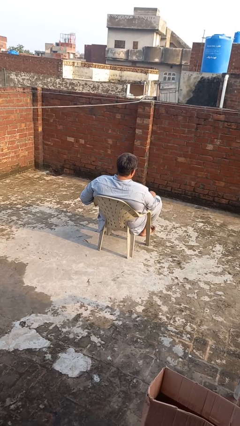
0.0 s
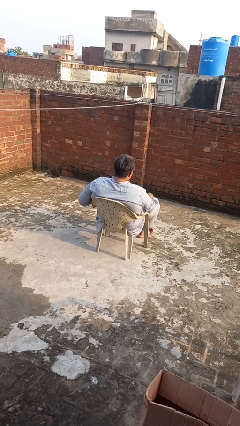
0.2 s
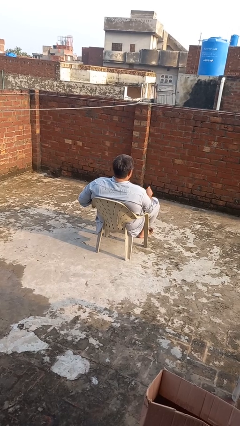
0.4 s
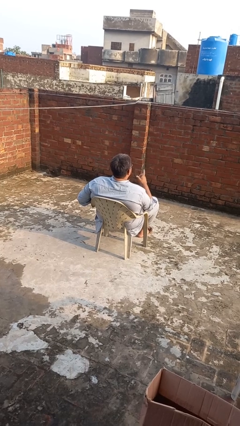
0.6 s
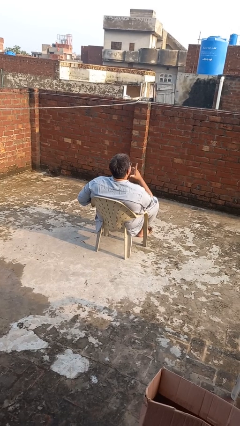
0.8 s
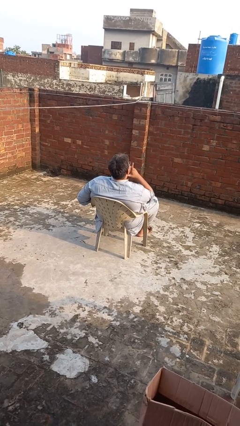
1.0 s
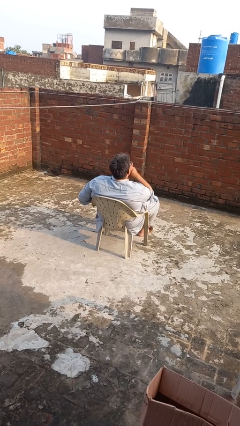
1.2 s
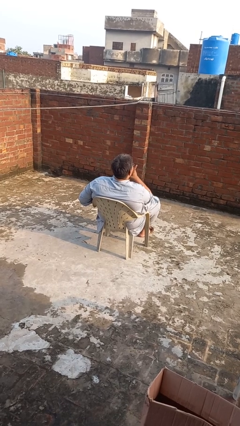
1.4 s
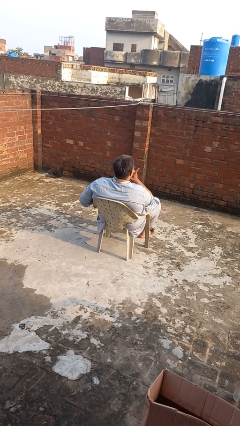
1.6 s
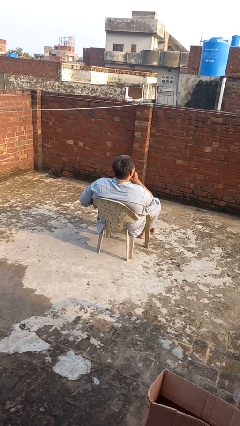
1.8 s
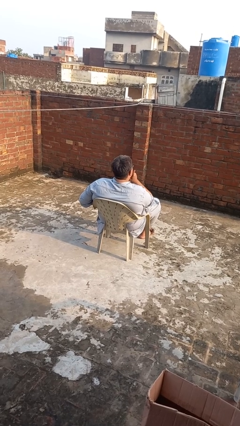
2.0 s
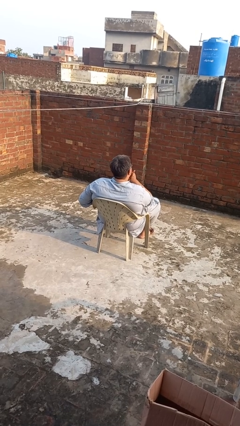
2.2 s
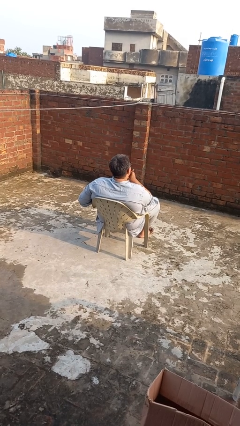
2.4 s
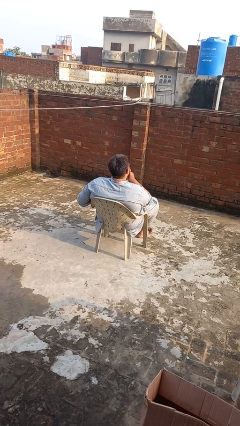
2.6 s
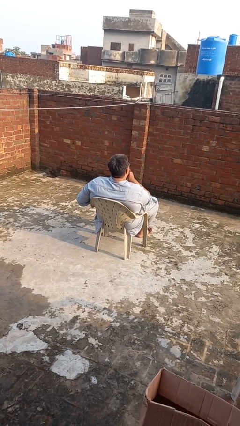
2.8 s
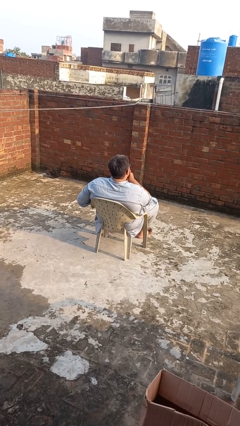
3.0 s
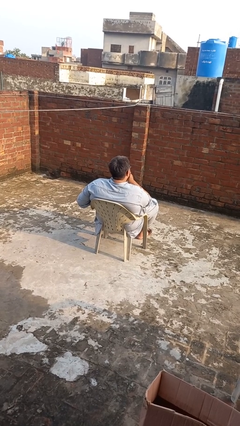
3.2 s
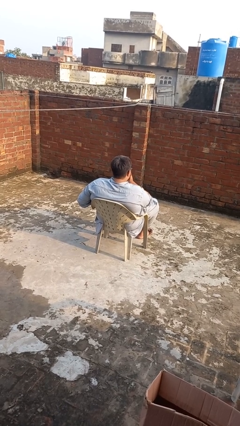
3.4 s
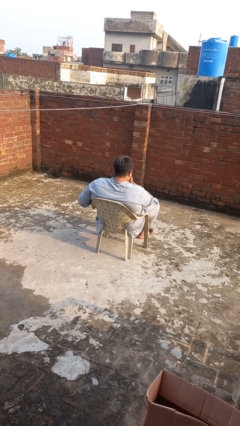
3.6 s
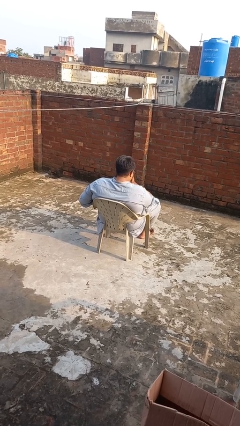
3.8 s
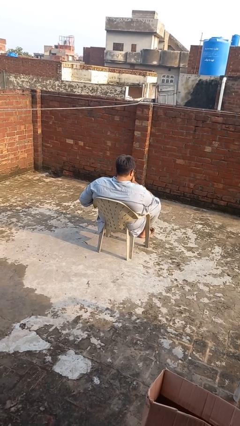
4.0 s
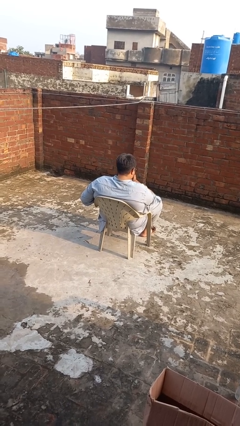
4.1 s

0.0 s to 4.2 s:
person strokes chin

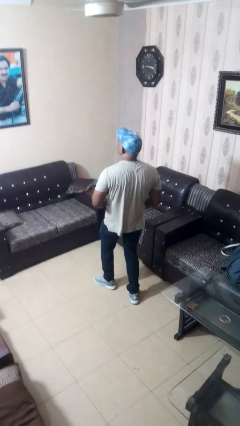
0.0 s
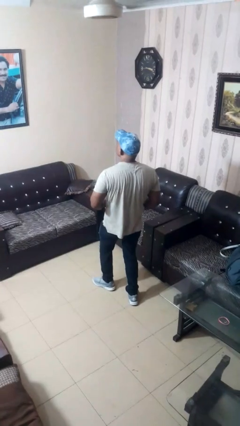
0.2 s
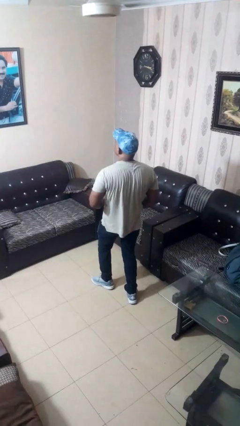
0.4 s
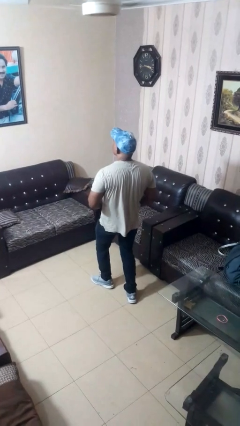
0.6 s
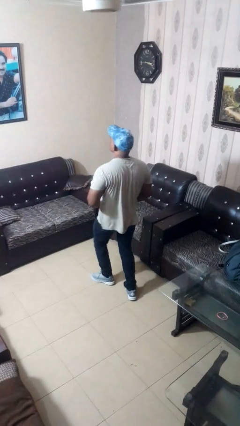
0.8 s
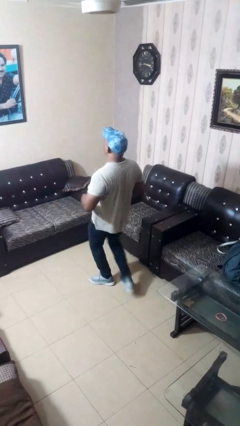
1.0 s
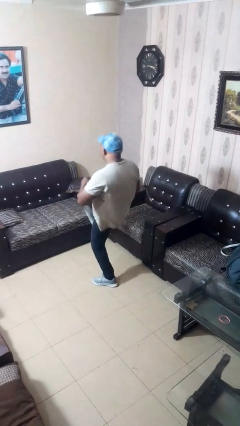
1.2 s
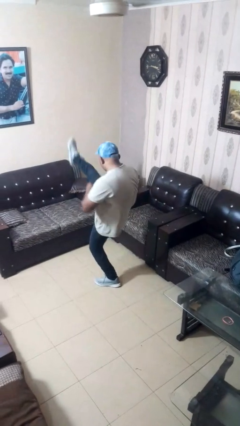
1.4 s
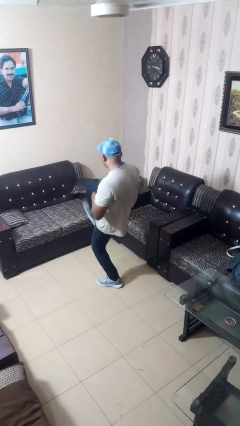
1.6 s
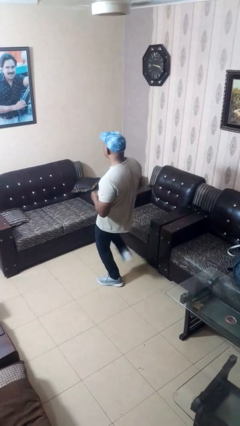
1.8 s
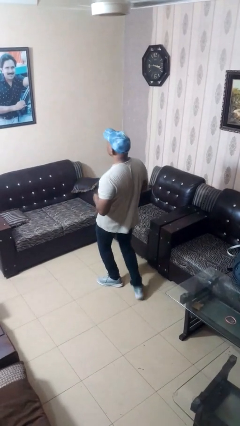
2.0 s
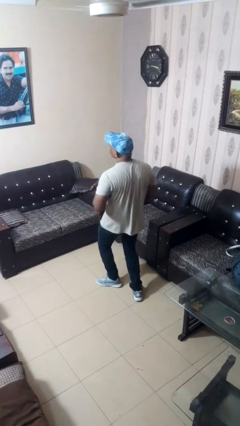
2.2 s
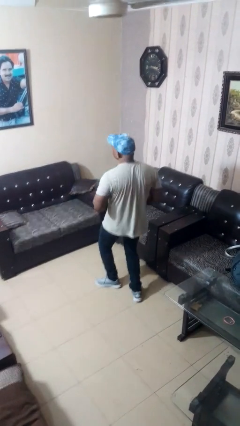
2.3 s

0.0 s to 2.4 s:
person karate kicks

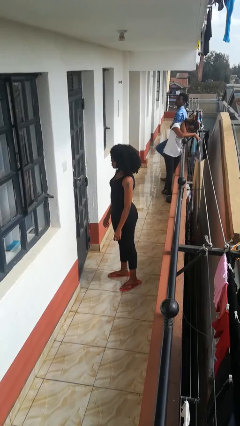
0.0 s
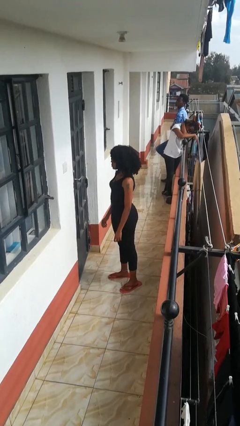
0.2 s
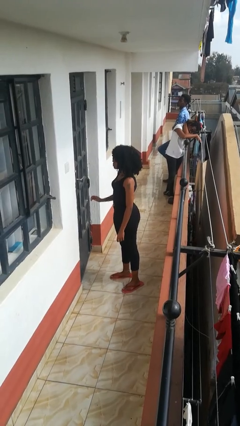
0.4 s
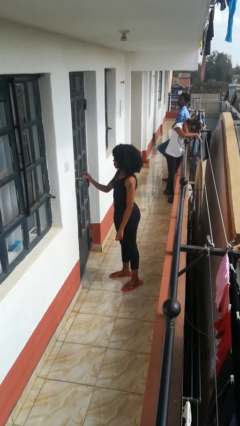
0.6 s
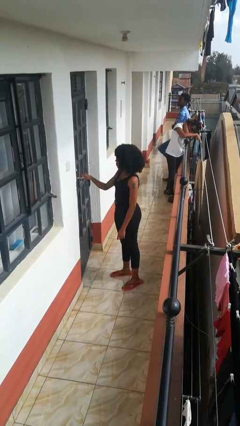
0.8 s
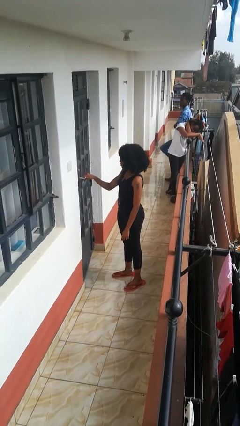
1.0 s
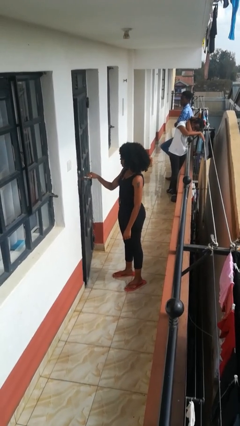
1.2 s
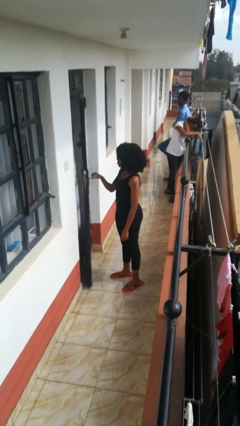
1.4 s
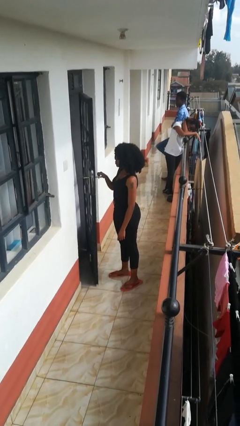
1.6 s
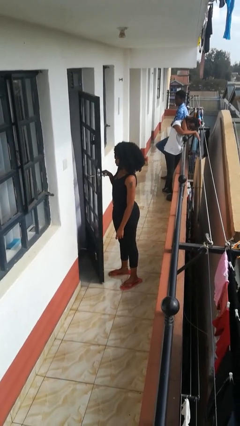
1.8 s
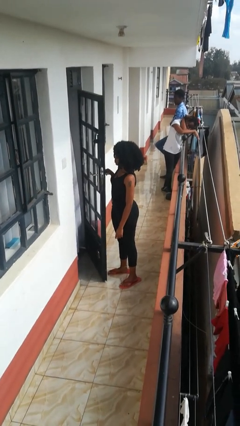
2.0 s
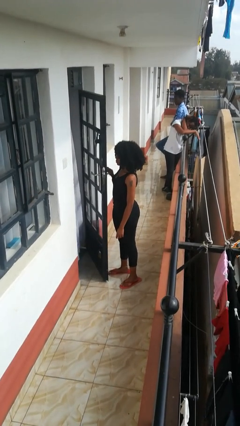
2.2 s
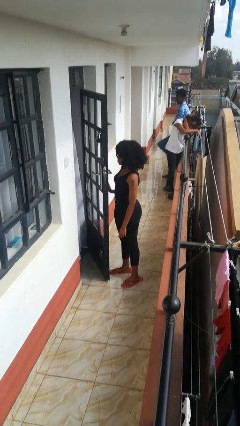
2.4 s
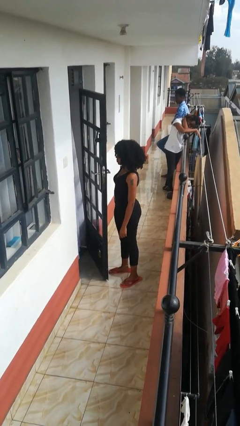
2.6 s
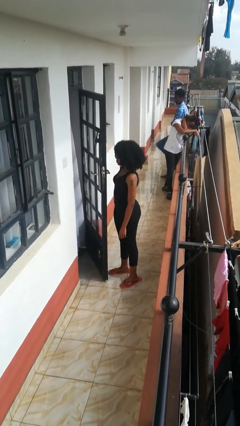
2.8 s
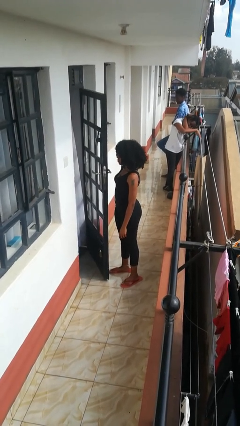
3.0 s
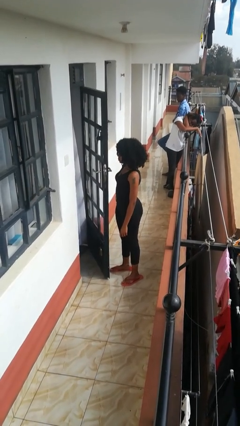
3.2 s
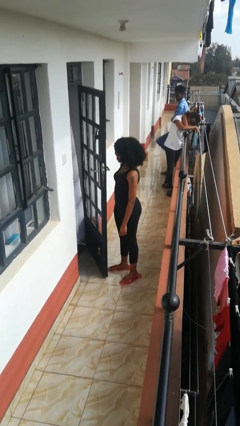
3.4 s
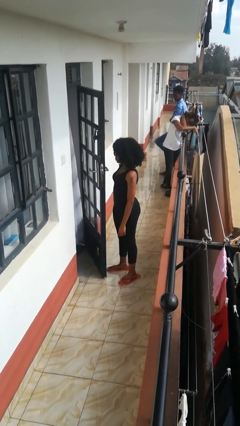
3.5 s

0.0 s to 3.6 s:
person opens facility door

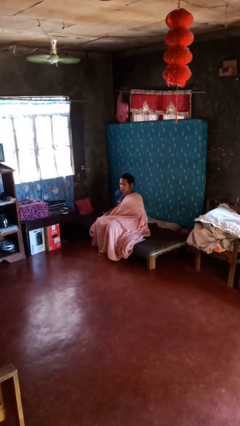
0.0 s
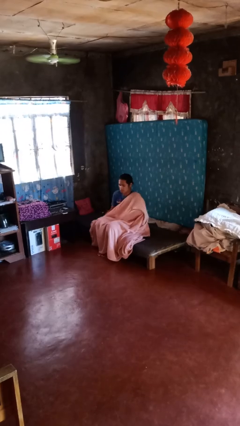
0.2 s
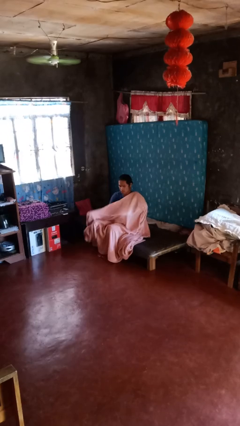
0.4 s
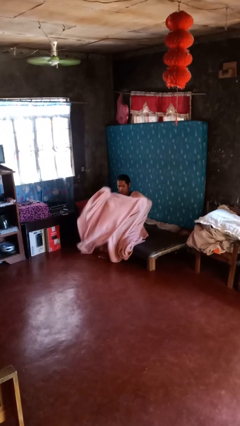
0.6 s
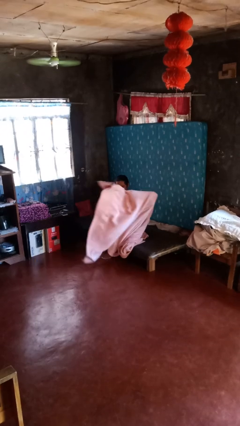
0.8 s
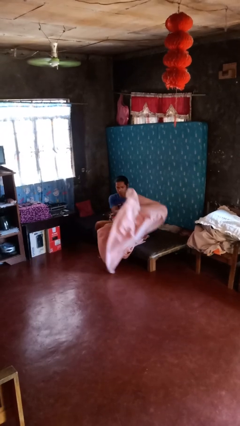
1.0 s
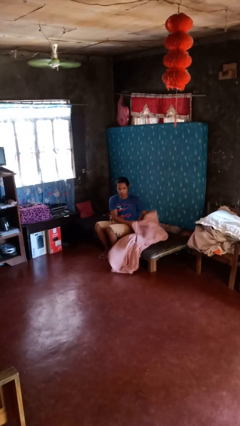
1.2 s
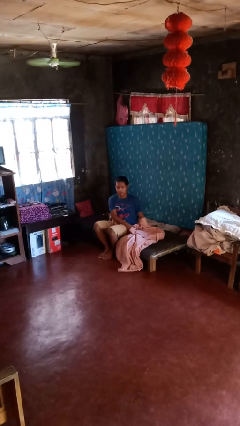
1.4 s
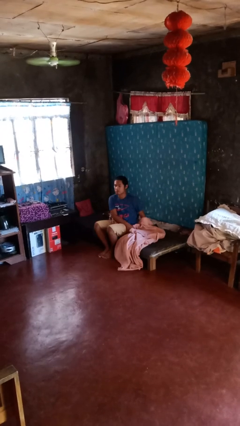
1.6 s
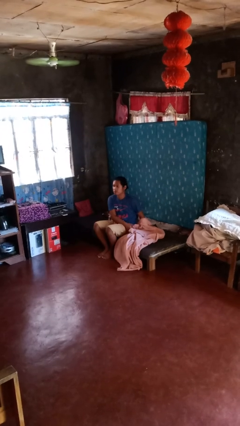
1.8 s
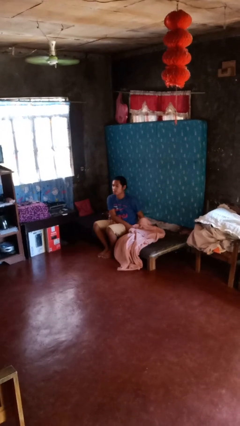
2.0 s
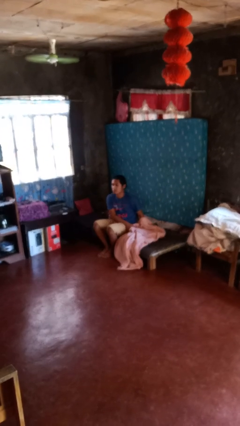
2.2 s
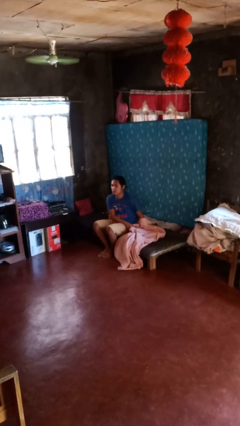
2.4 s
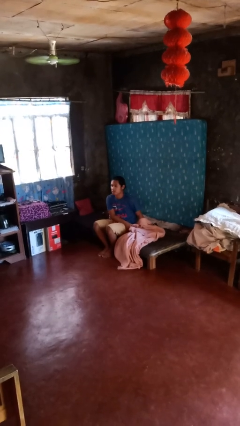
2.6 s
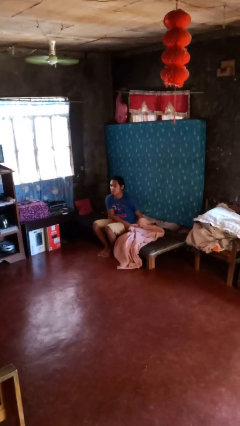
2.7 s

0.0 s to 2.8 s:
person uncovers with blanket

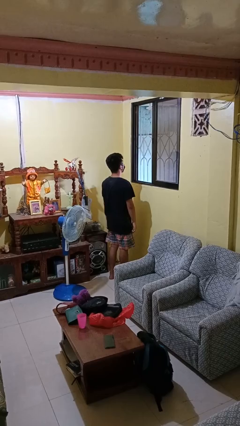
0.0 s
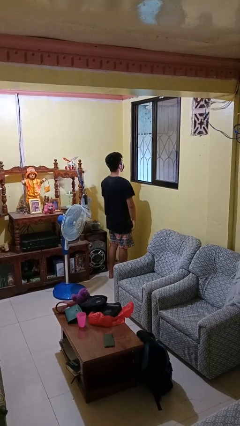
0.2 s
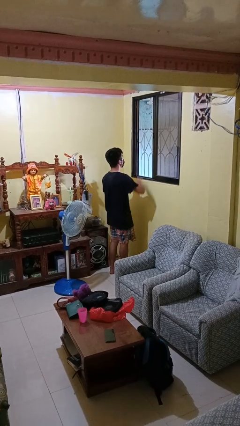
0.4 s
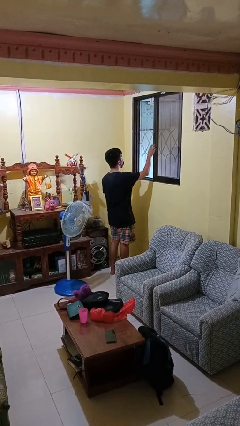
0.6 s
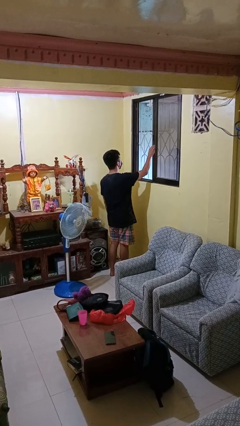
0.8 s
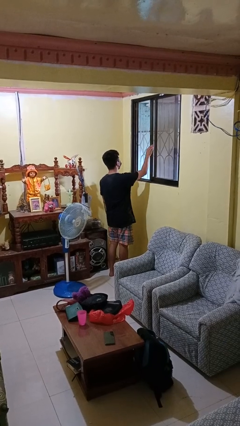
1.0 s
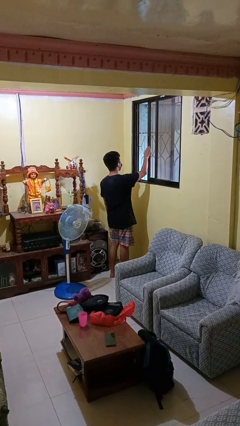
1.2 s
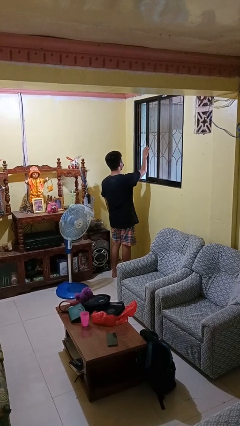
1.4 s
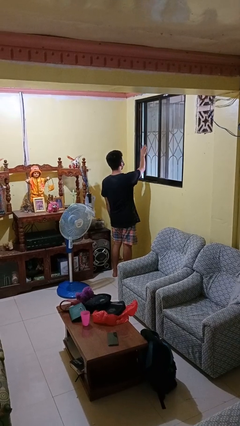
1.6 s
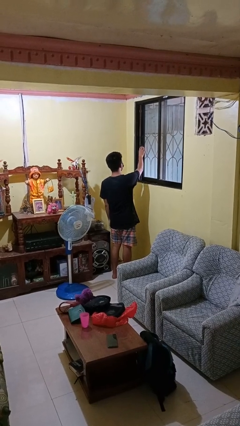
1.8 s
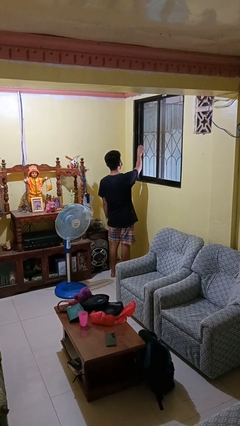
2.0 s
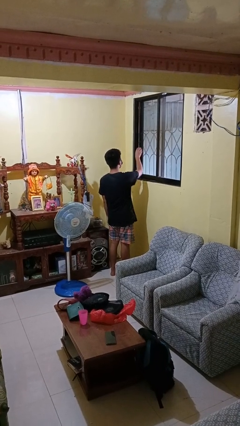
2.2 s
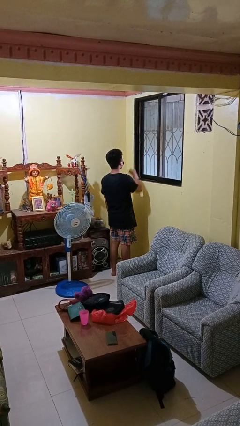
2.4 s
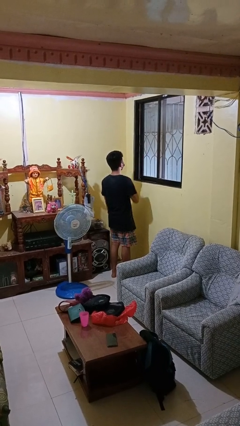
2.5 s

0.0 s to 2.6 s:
person closes home window

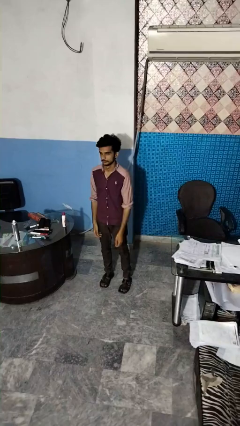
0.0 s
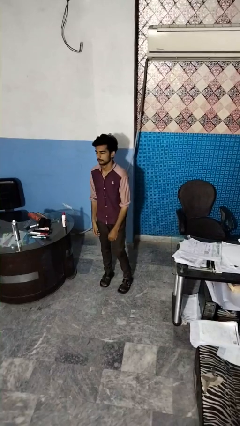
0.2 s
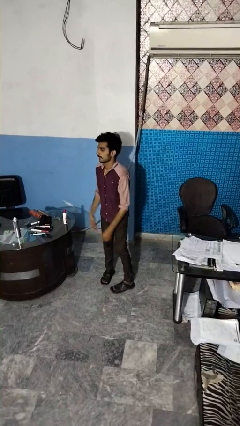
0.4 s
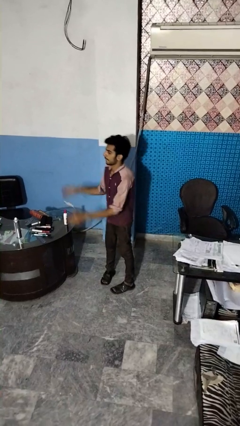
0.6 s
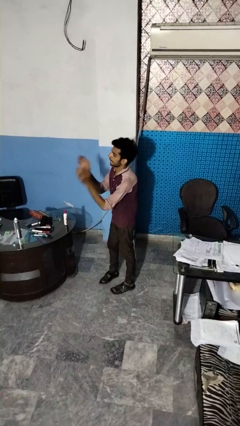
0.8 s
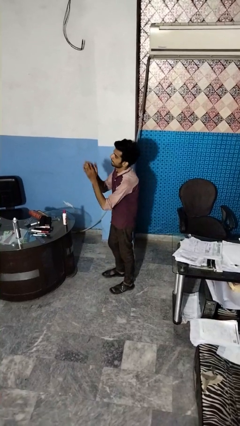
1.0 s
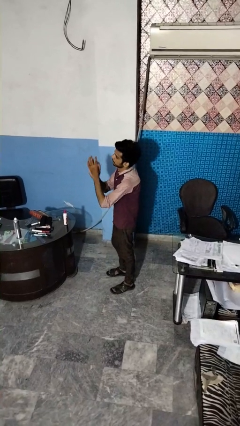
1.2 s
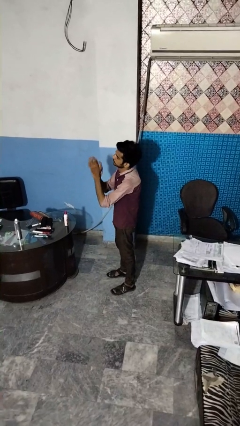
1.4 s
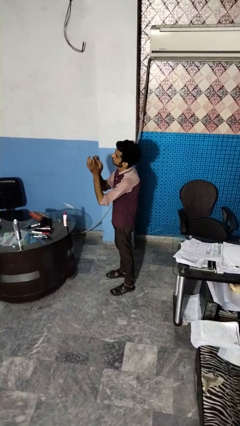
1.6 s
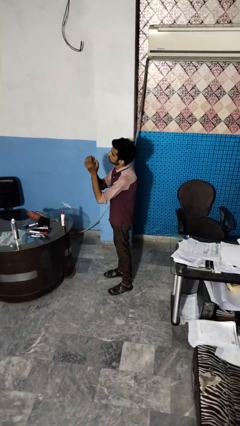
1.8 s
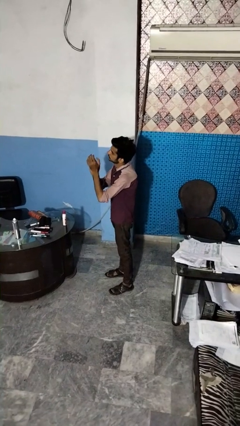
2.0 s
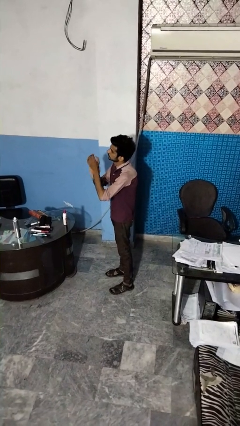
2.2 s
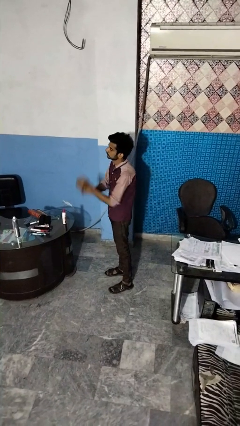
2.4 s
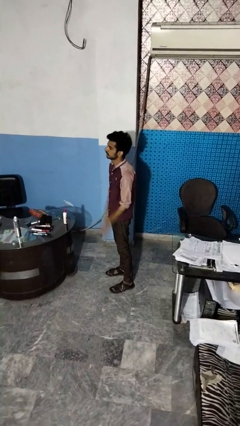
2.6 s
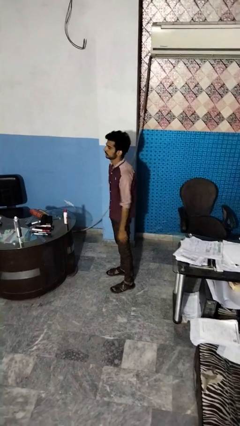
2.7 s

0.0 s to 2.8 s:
person claps hands
